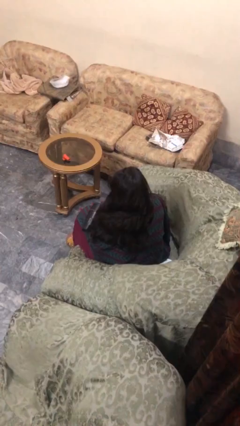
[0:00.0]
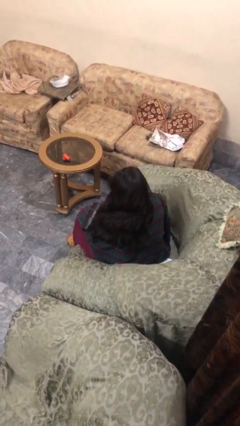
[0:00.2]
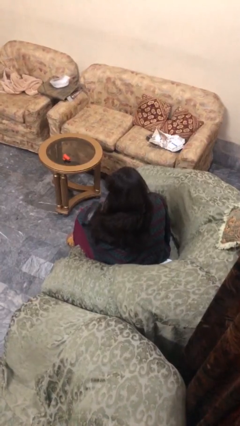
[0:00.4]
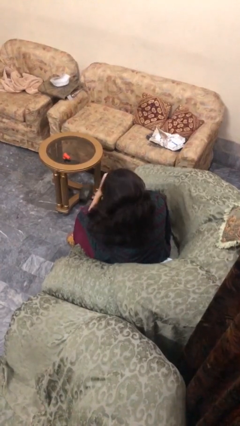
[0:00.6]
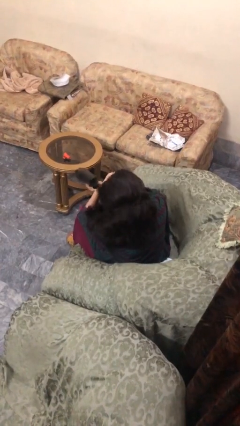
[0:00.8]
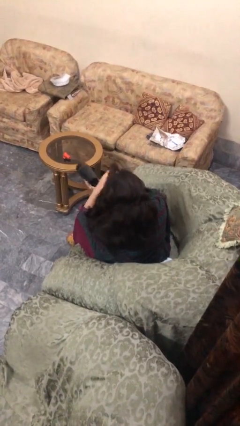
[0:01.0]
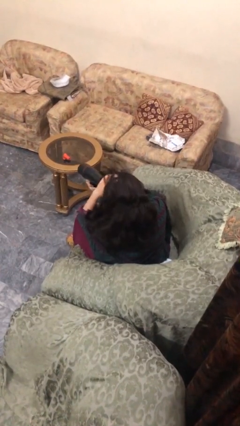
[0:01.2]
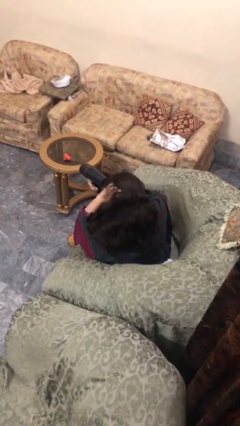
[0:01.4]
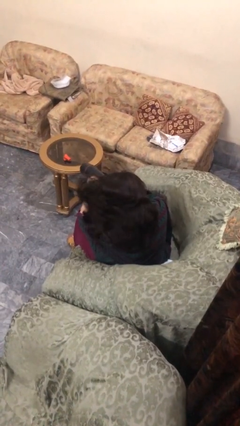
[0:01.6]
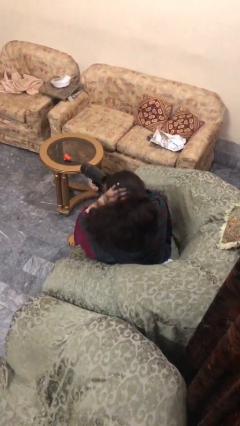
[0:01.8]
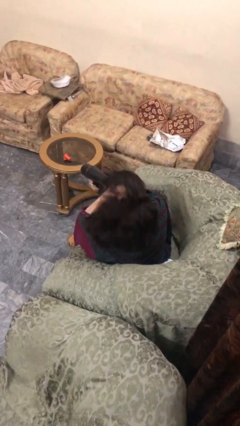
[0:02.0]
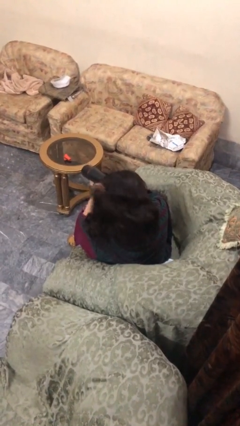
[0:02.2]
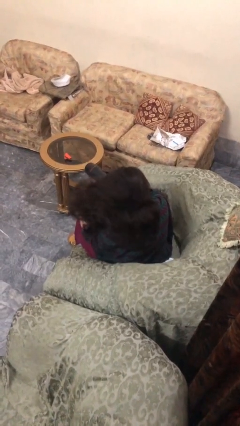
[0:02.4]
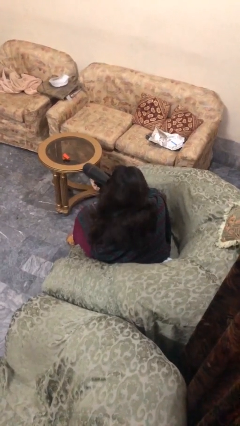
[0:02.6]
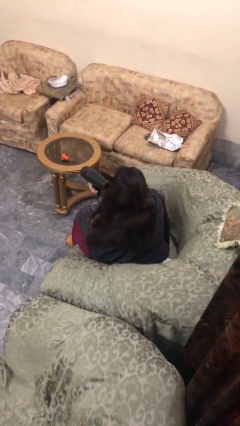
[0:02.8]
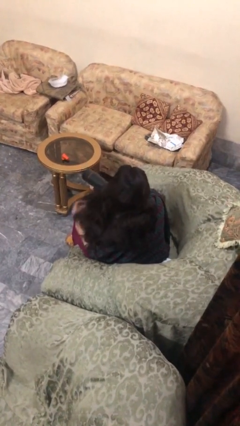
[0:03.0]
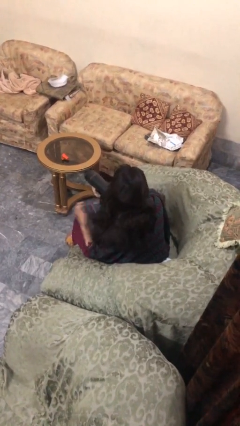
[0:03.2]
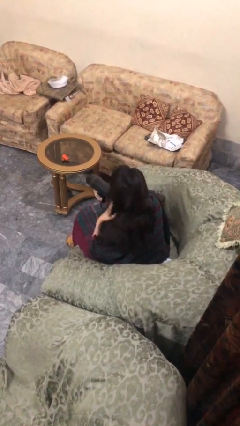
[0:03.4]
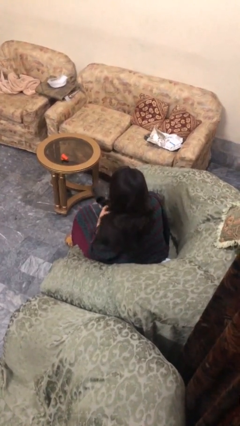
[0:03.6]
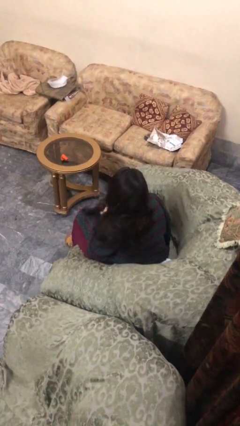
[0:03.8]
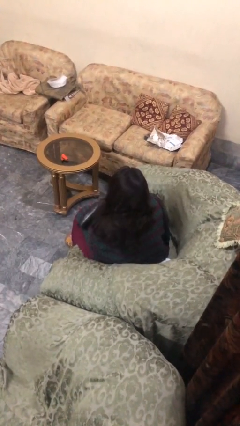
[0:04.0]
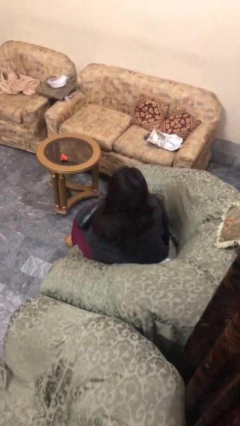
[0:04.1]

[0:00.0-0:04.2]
person dries hair with hairdryer

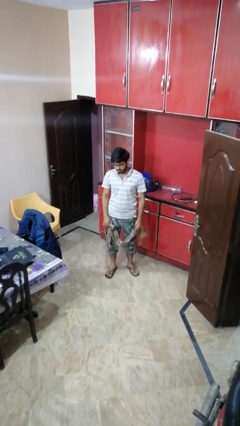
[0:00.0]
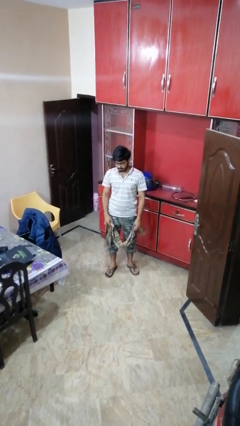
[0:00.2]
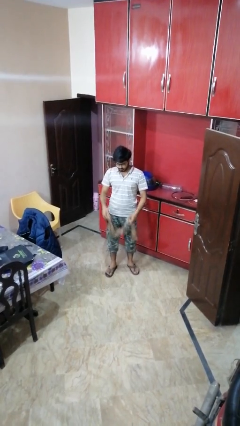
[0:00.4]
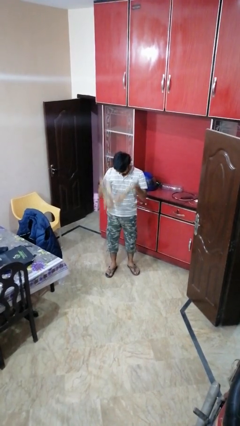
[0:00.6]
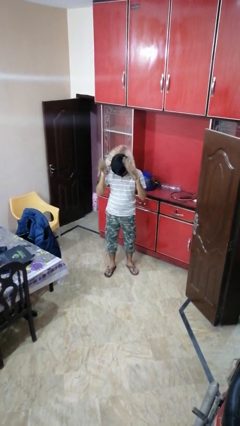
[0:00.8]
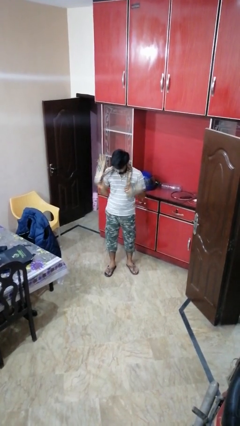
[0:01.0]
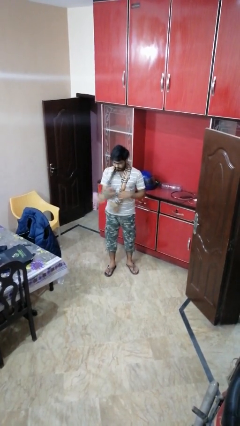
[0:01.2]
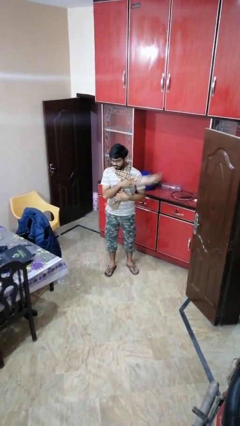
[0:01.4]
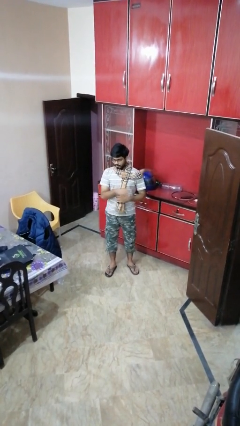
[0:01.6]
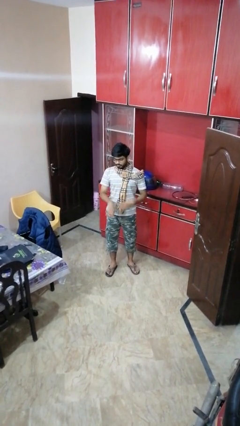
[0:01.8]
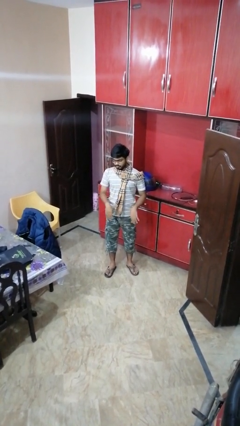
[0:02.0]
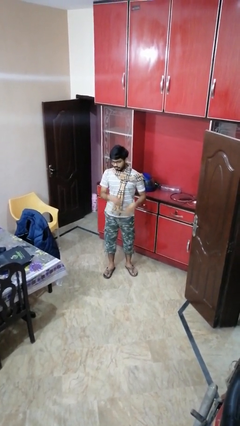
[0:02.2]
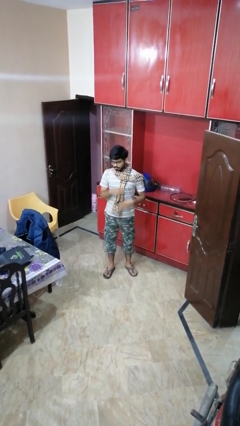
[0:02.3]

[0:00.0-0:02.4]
person puts on scarf

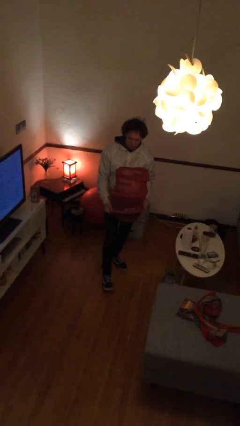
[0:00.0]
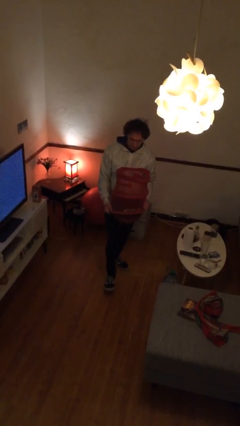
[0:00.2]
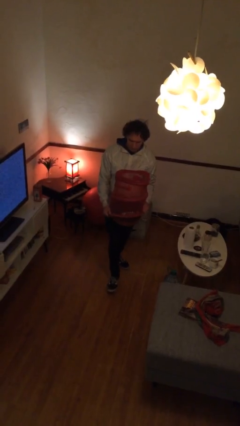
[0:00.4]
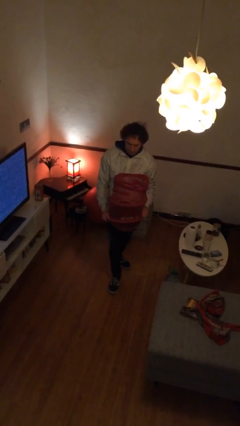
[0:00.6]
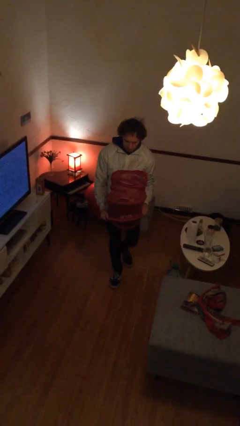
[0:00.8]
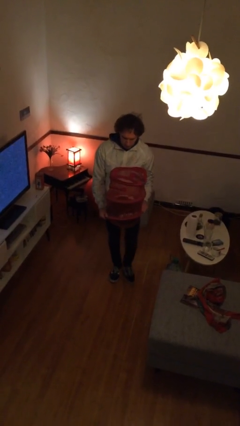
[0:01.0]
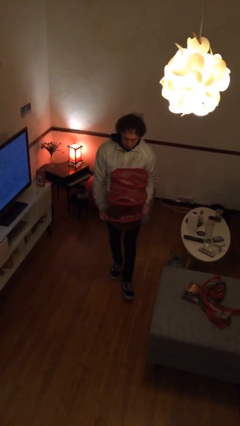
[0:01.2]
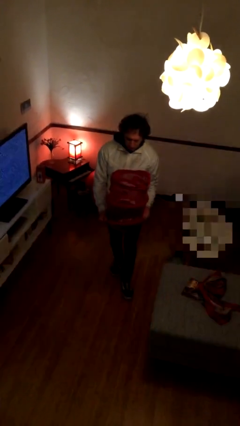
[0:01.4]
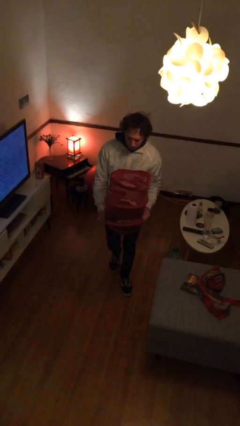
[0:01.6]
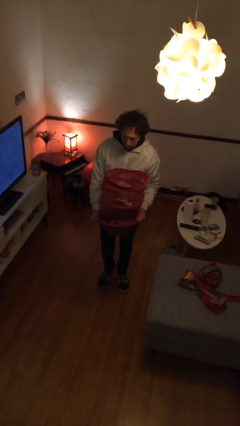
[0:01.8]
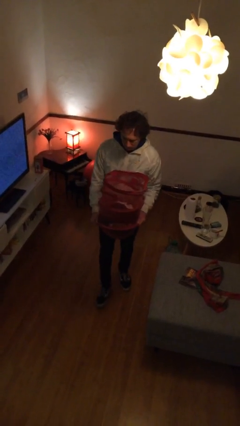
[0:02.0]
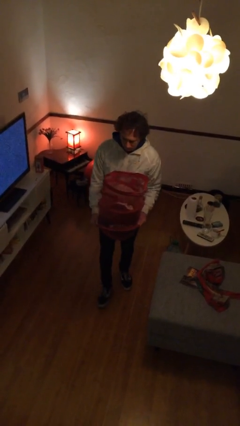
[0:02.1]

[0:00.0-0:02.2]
person carries laundry basket

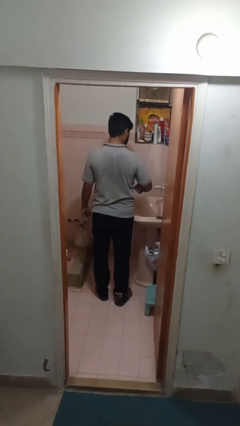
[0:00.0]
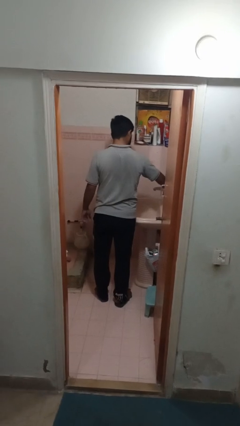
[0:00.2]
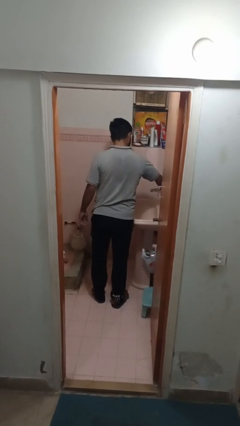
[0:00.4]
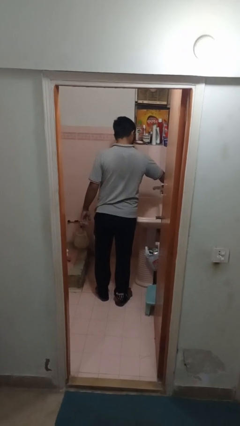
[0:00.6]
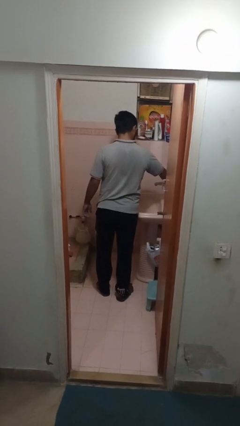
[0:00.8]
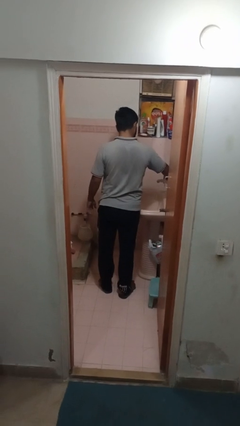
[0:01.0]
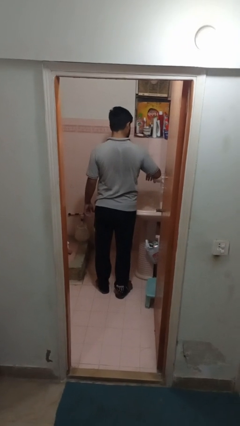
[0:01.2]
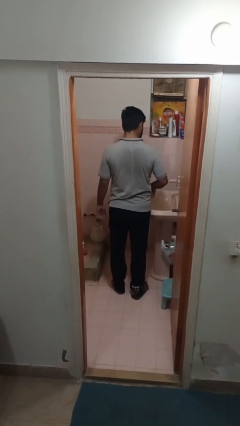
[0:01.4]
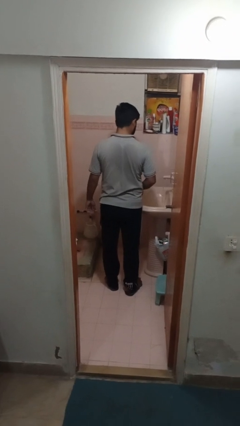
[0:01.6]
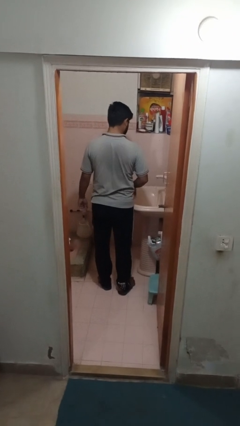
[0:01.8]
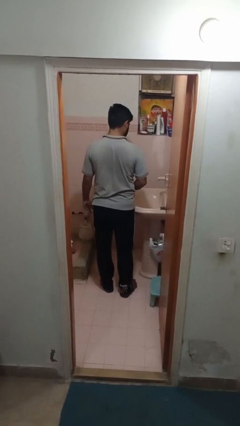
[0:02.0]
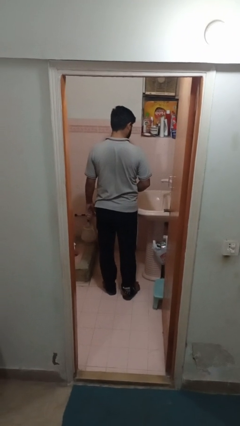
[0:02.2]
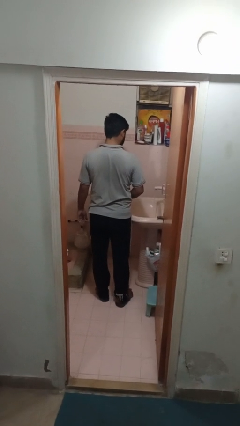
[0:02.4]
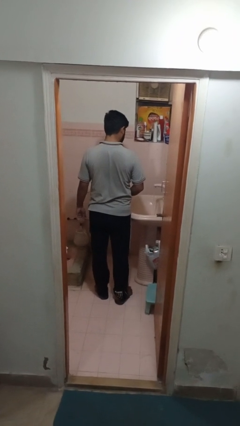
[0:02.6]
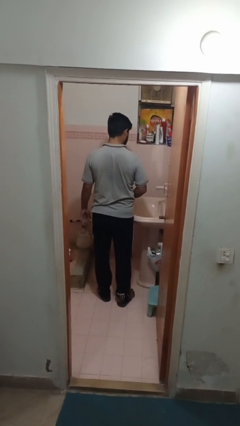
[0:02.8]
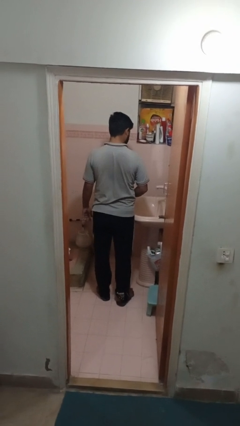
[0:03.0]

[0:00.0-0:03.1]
person turns on faucet

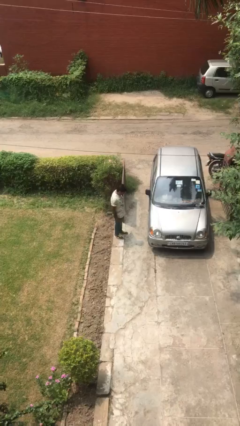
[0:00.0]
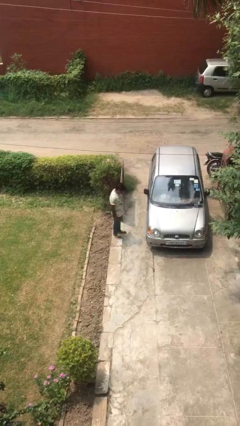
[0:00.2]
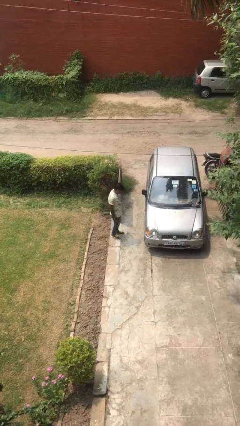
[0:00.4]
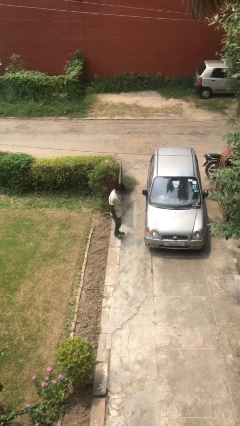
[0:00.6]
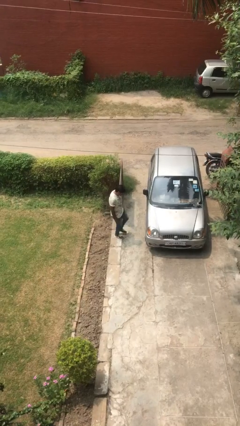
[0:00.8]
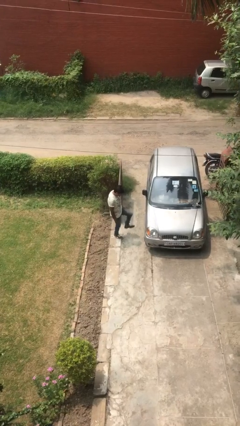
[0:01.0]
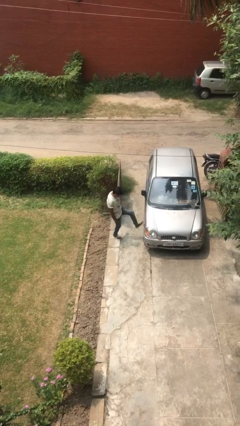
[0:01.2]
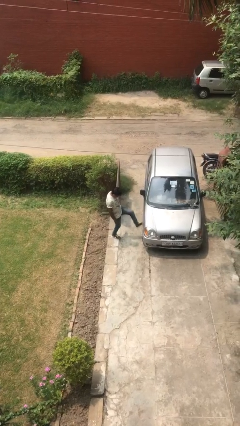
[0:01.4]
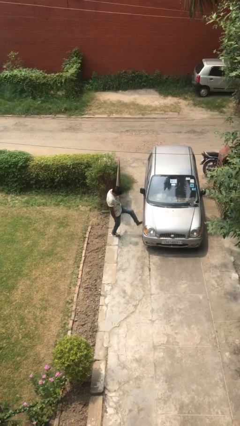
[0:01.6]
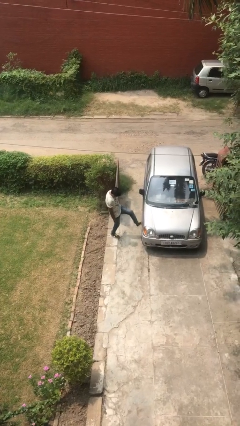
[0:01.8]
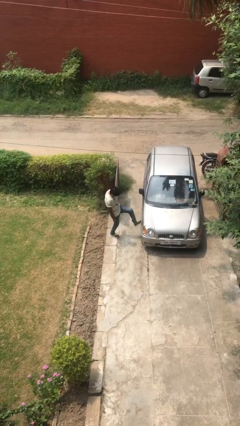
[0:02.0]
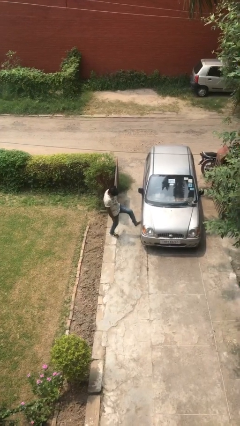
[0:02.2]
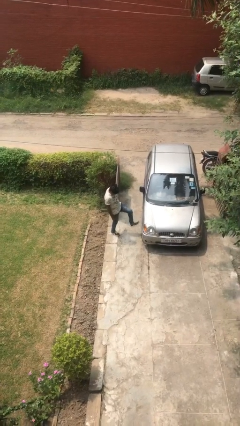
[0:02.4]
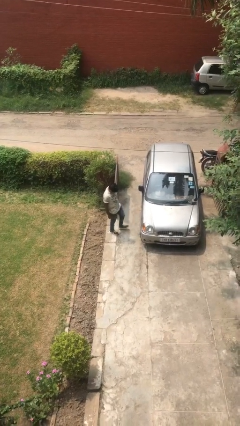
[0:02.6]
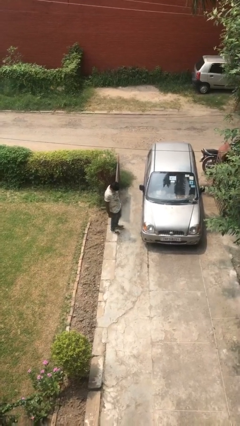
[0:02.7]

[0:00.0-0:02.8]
person kicks car tires

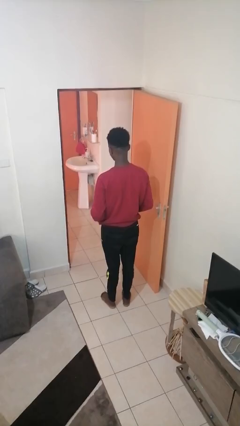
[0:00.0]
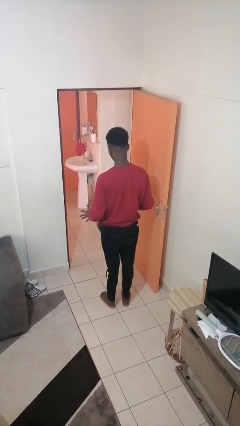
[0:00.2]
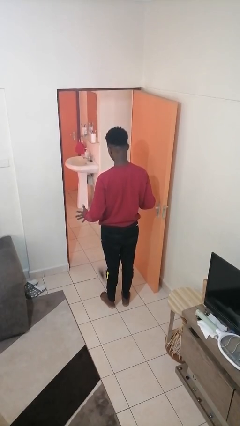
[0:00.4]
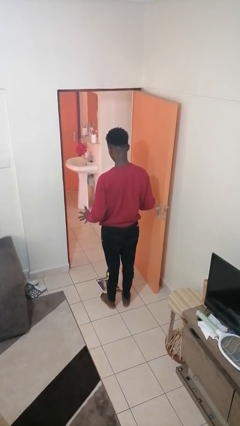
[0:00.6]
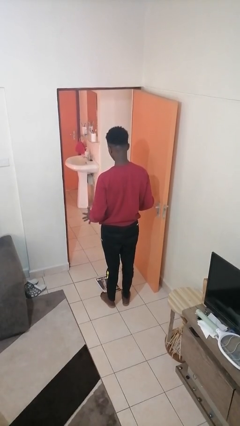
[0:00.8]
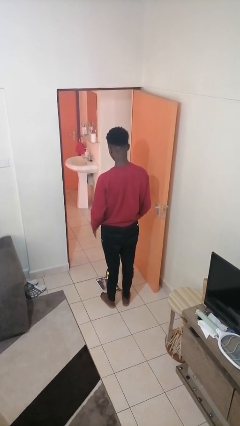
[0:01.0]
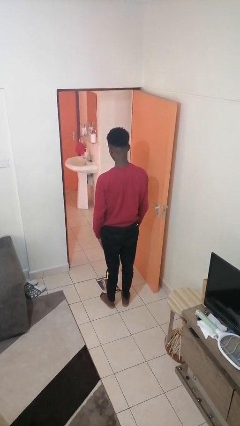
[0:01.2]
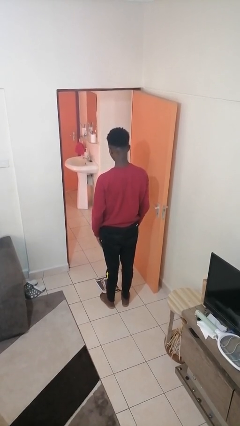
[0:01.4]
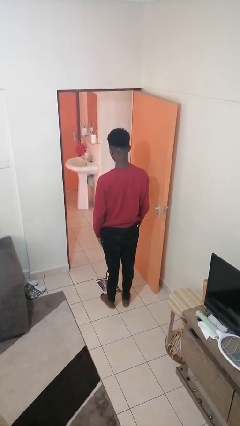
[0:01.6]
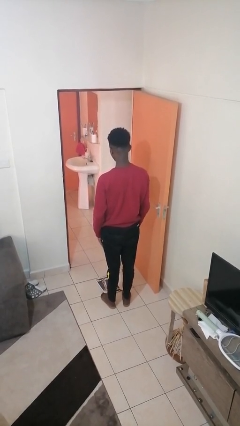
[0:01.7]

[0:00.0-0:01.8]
person drops object

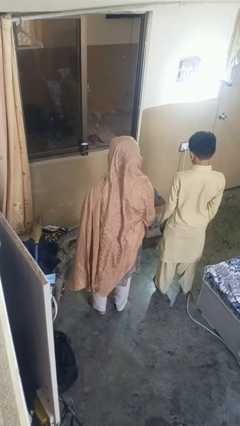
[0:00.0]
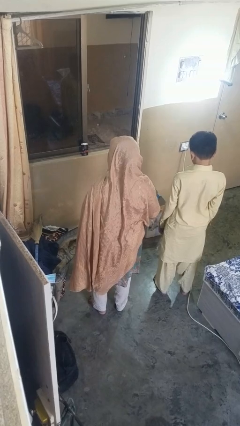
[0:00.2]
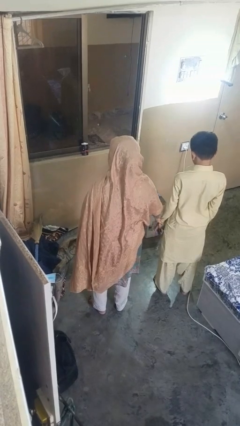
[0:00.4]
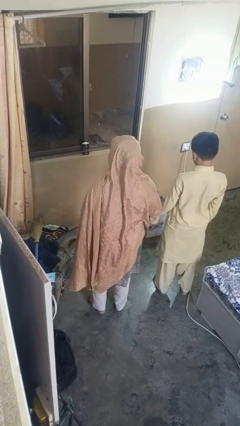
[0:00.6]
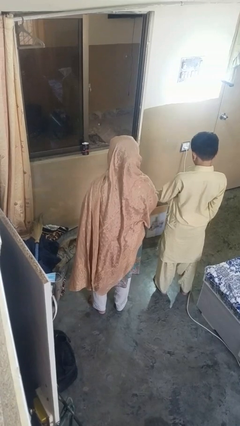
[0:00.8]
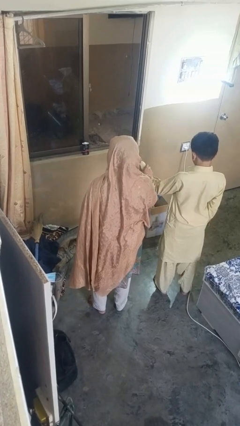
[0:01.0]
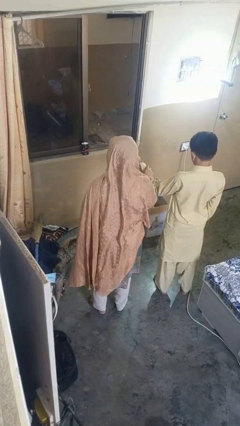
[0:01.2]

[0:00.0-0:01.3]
person grabs person by forearm
